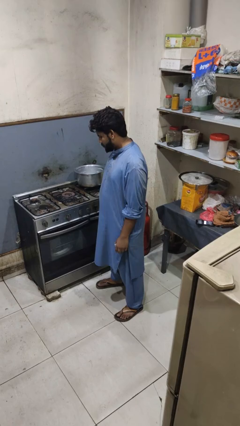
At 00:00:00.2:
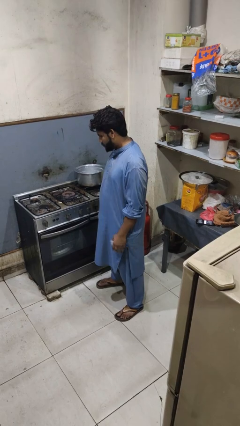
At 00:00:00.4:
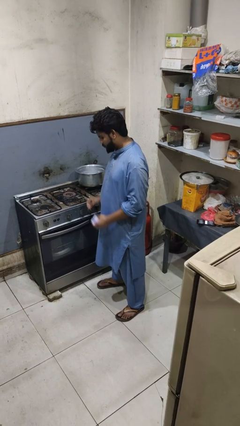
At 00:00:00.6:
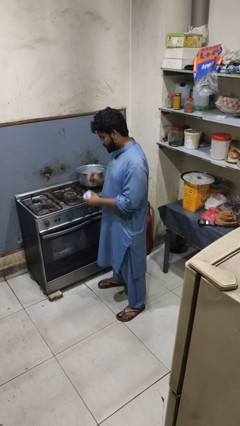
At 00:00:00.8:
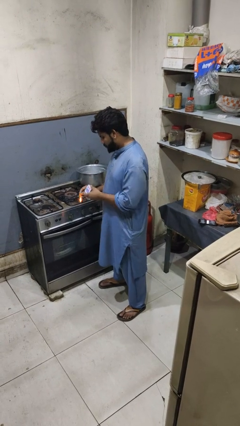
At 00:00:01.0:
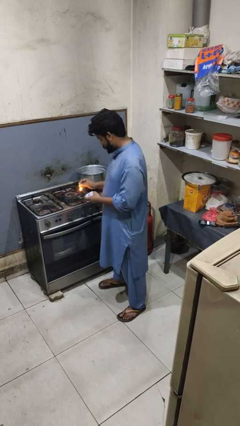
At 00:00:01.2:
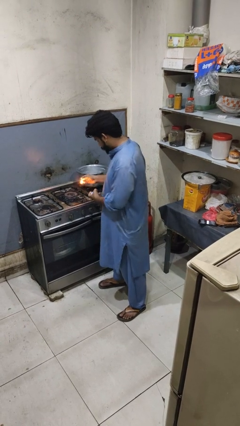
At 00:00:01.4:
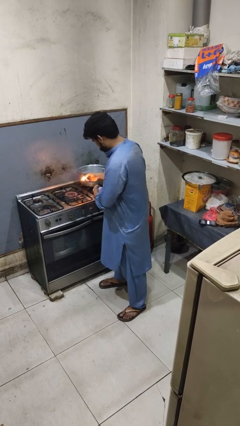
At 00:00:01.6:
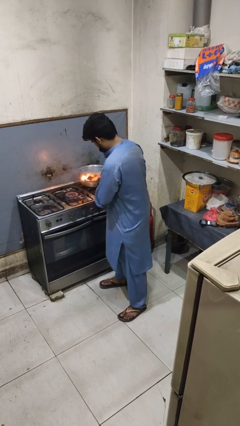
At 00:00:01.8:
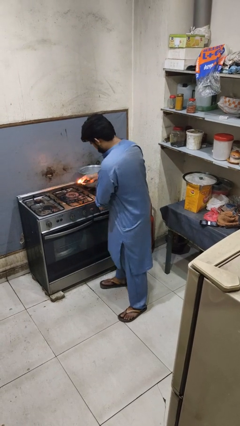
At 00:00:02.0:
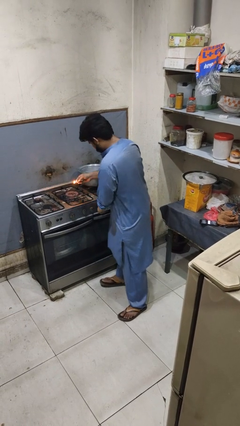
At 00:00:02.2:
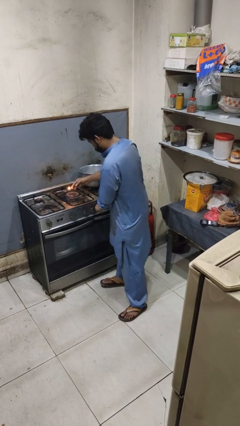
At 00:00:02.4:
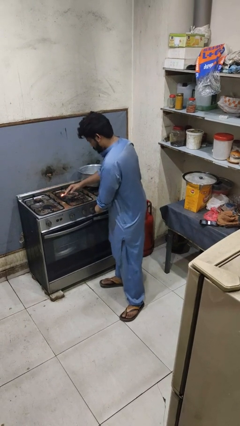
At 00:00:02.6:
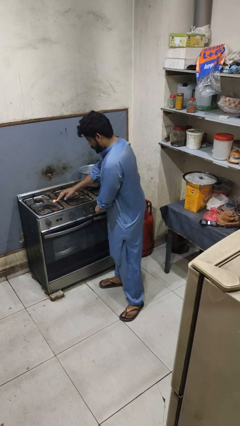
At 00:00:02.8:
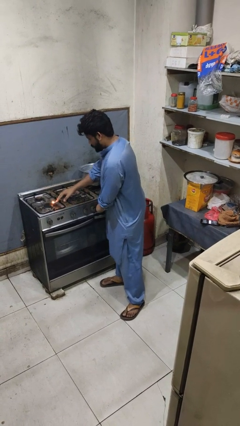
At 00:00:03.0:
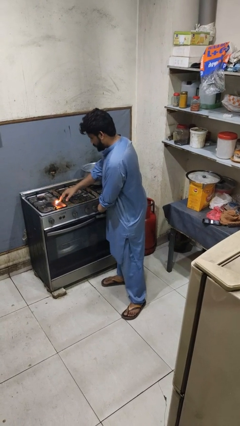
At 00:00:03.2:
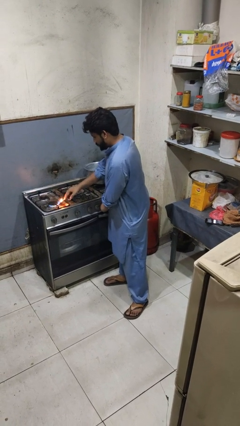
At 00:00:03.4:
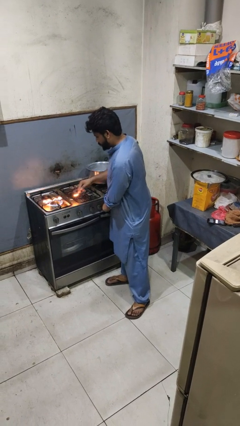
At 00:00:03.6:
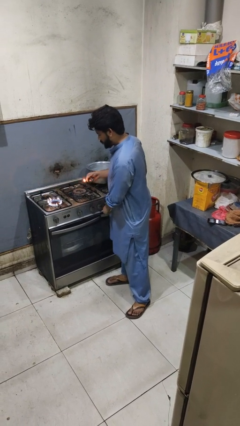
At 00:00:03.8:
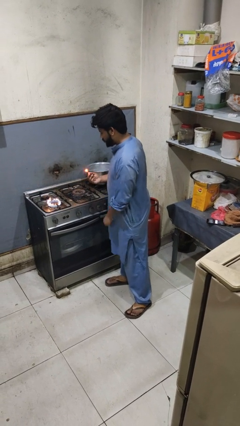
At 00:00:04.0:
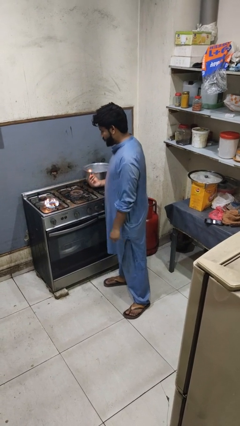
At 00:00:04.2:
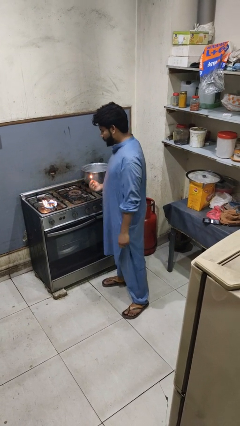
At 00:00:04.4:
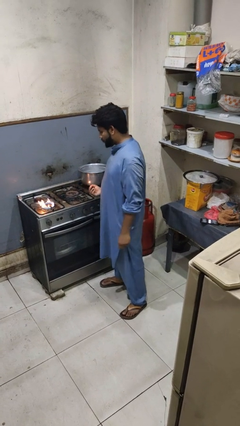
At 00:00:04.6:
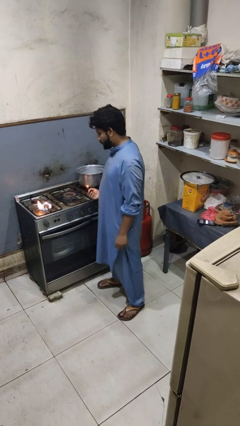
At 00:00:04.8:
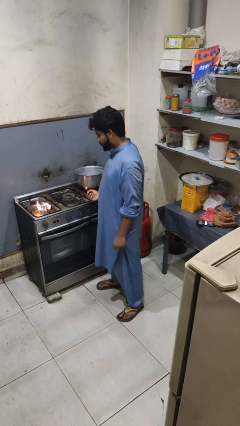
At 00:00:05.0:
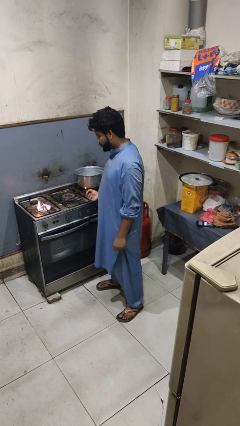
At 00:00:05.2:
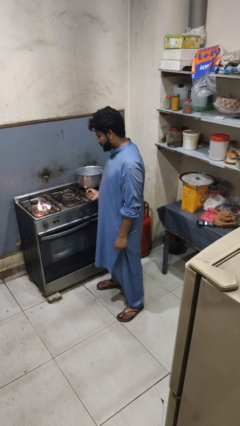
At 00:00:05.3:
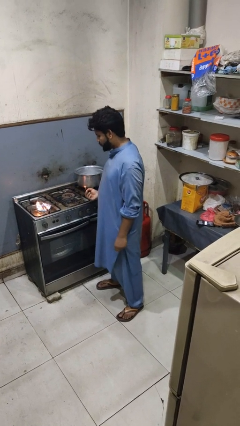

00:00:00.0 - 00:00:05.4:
person turns on stovetop

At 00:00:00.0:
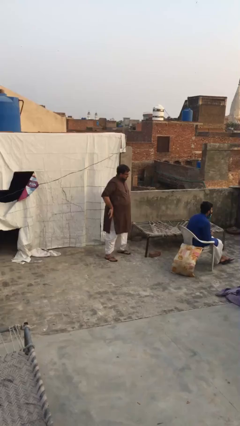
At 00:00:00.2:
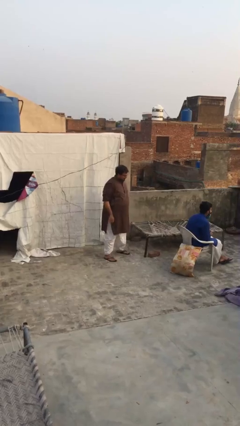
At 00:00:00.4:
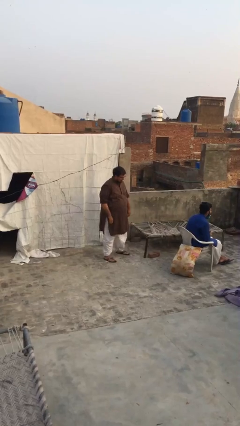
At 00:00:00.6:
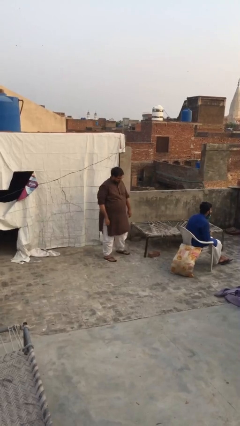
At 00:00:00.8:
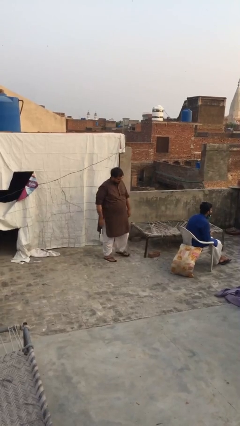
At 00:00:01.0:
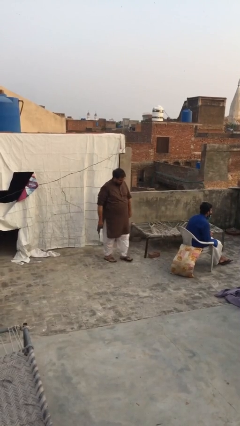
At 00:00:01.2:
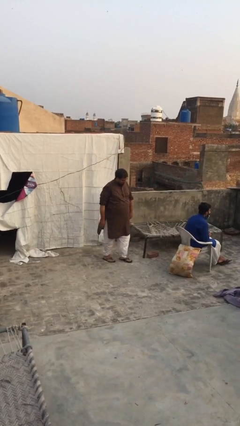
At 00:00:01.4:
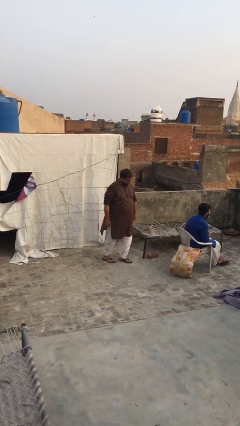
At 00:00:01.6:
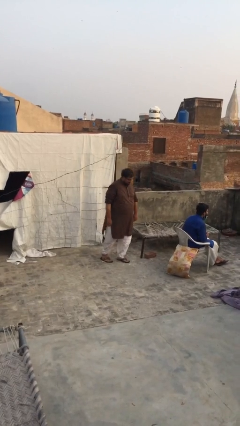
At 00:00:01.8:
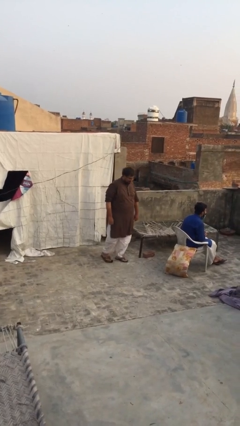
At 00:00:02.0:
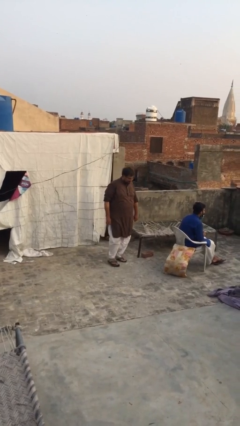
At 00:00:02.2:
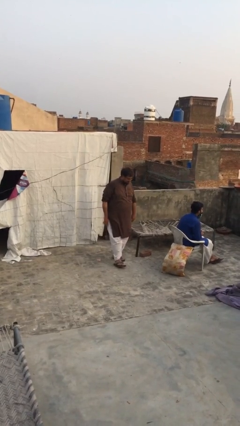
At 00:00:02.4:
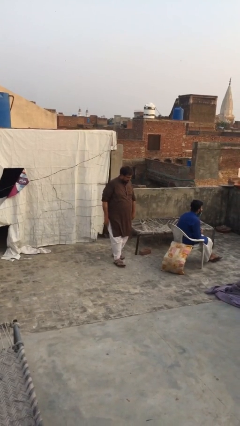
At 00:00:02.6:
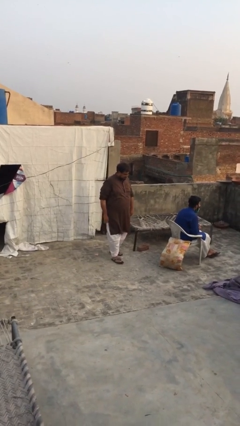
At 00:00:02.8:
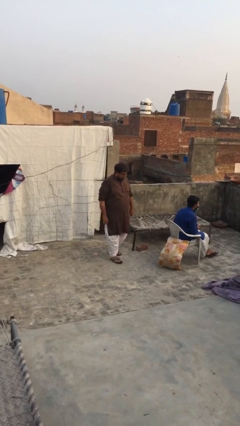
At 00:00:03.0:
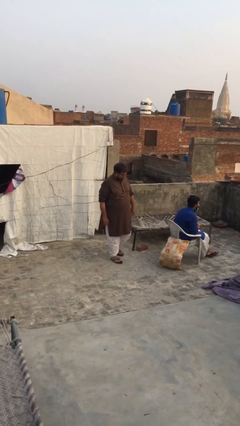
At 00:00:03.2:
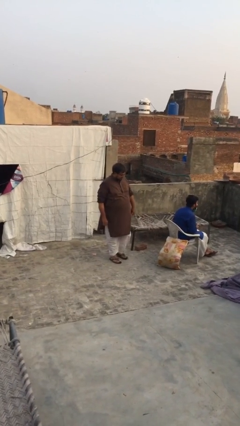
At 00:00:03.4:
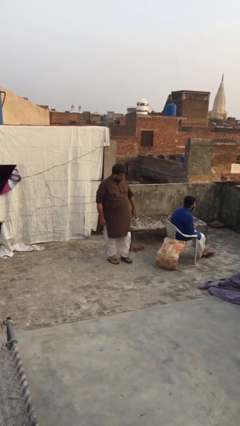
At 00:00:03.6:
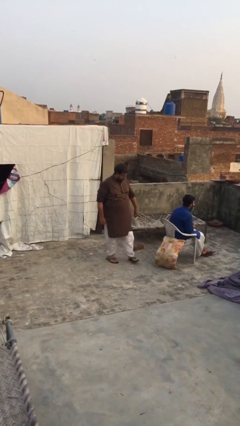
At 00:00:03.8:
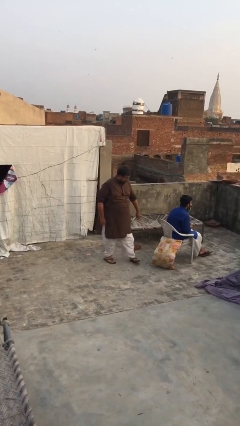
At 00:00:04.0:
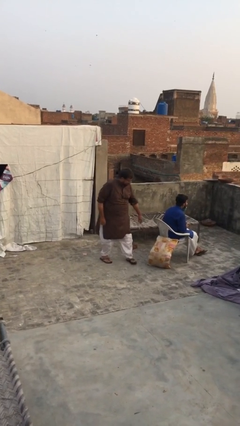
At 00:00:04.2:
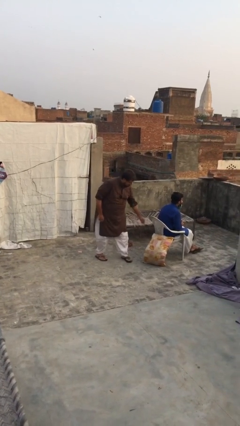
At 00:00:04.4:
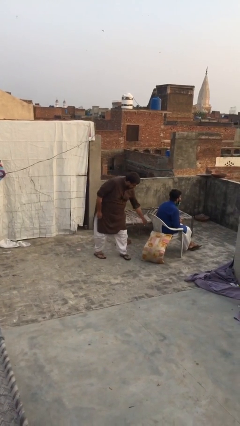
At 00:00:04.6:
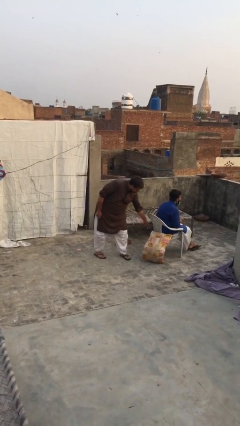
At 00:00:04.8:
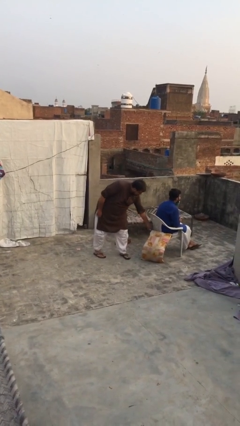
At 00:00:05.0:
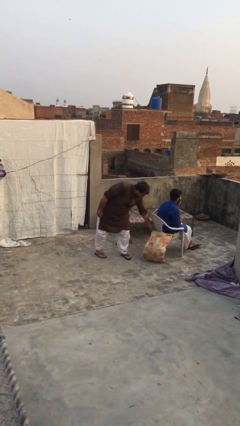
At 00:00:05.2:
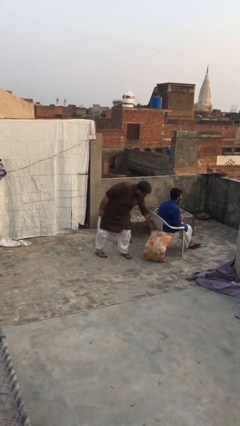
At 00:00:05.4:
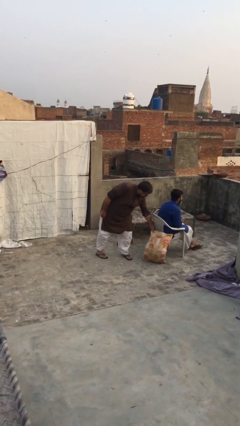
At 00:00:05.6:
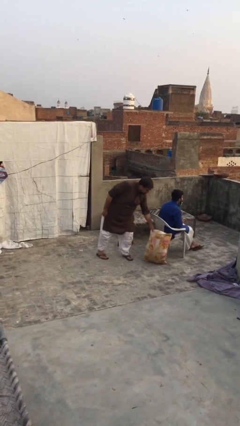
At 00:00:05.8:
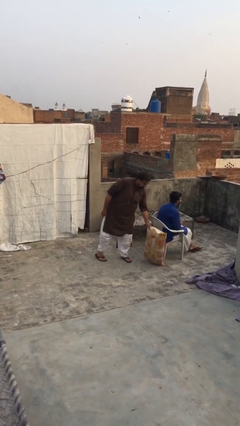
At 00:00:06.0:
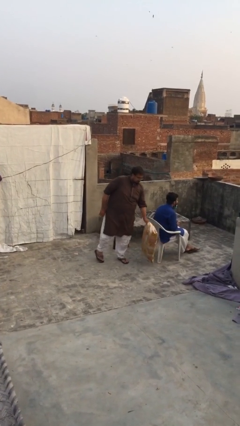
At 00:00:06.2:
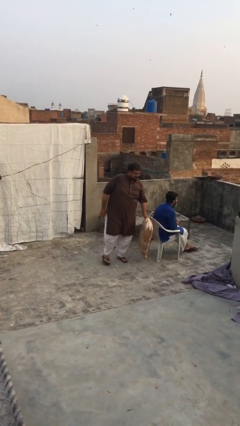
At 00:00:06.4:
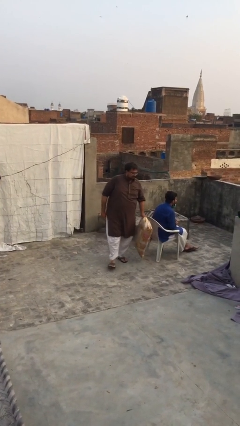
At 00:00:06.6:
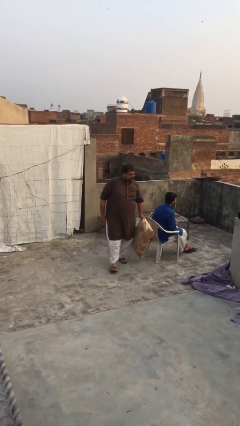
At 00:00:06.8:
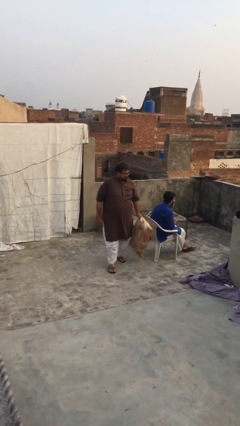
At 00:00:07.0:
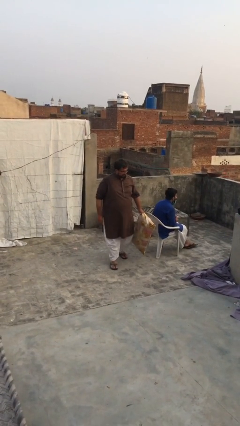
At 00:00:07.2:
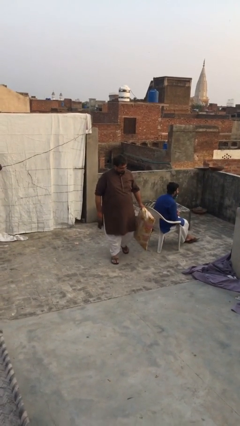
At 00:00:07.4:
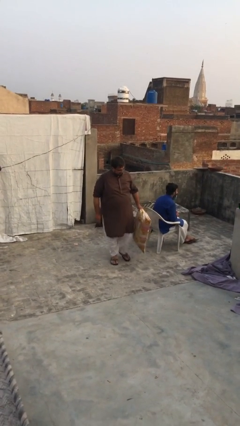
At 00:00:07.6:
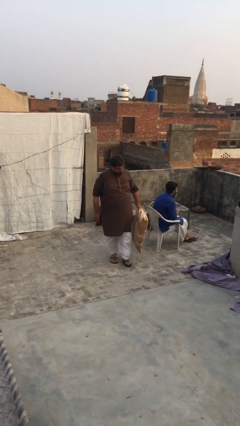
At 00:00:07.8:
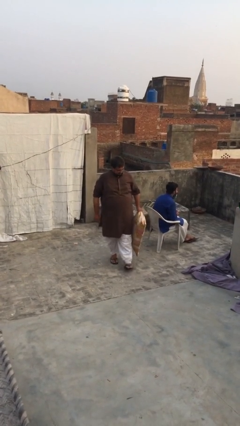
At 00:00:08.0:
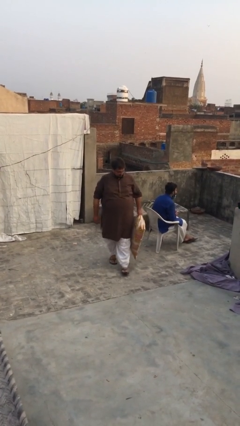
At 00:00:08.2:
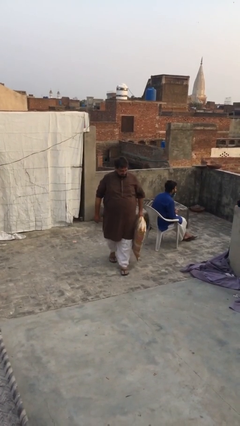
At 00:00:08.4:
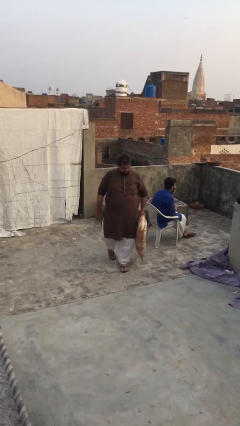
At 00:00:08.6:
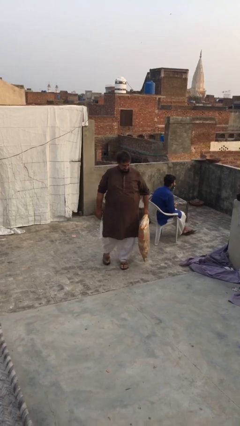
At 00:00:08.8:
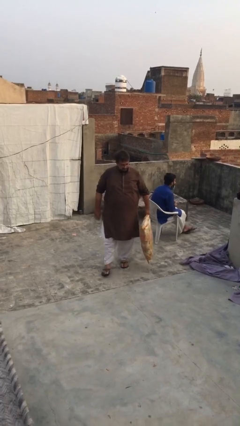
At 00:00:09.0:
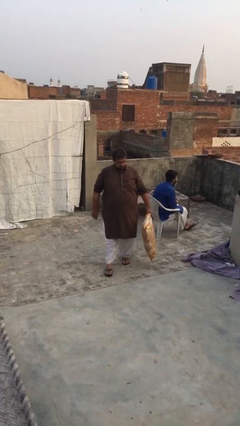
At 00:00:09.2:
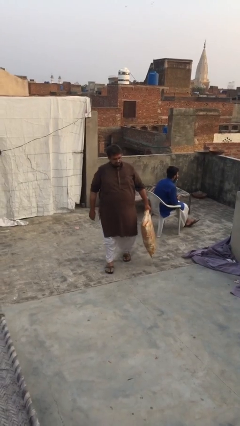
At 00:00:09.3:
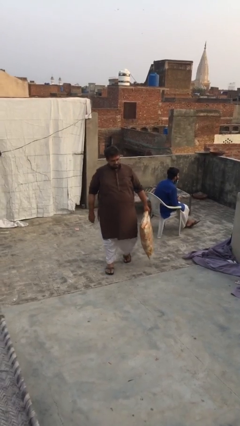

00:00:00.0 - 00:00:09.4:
person steals object from person

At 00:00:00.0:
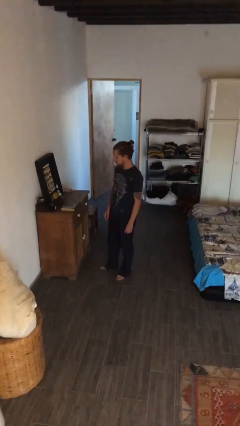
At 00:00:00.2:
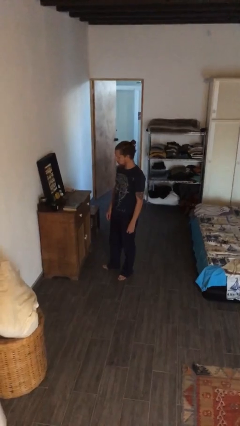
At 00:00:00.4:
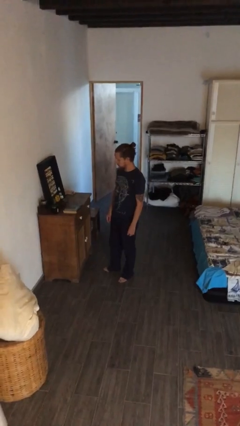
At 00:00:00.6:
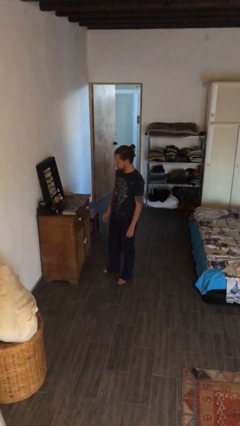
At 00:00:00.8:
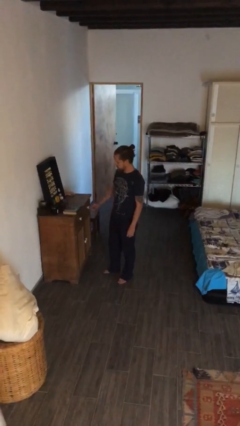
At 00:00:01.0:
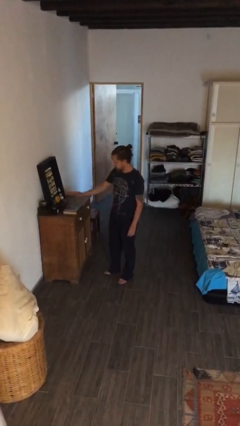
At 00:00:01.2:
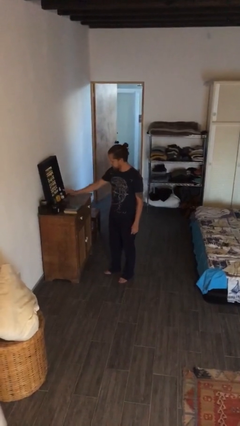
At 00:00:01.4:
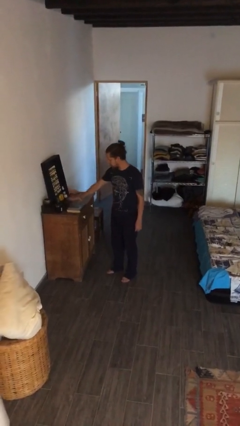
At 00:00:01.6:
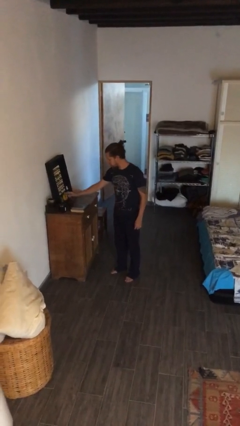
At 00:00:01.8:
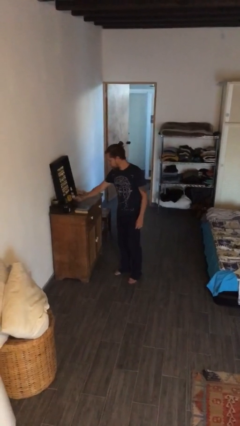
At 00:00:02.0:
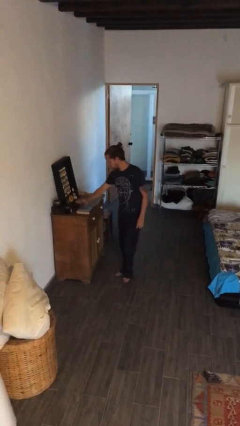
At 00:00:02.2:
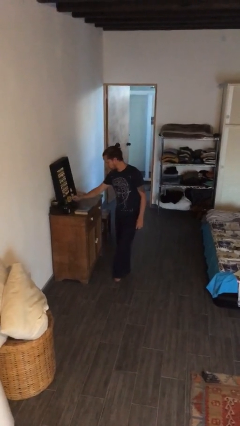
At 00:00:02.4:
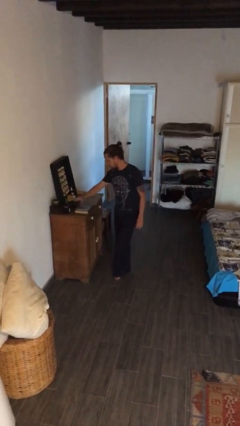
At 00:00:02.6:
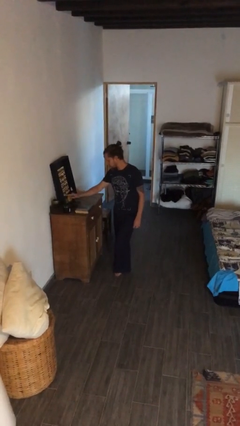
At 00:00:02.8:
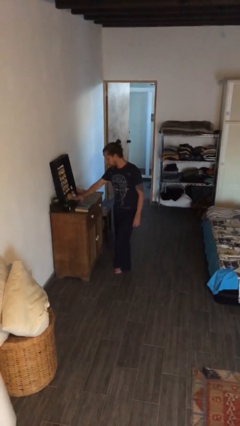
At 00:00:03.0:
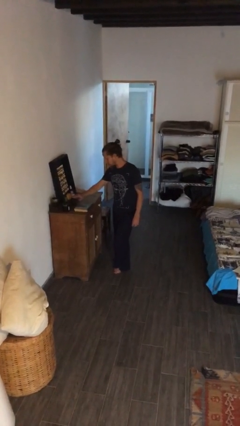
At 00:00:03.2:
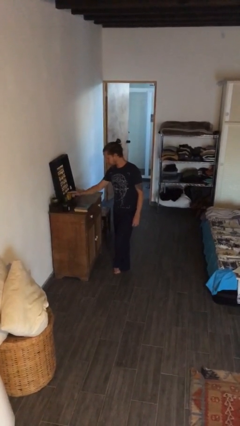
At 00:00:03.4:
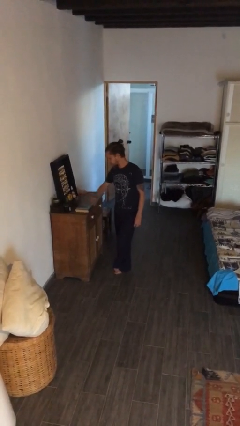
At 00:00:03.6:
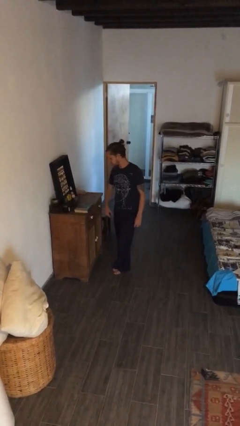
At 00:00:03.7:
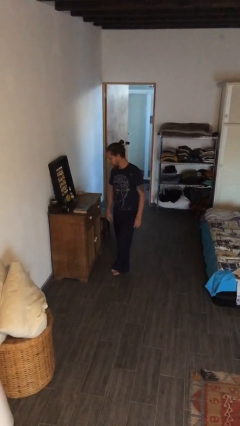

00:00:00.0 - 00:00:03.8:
person waves hand over object
